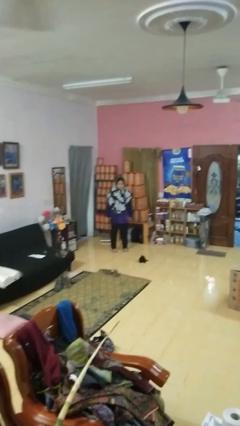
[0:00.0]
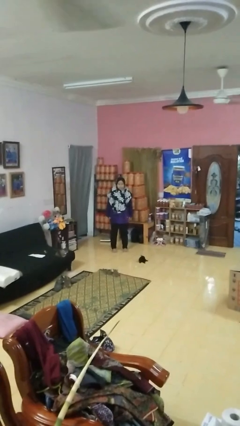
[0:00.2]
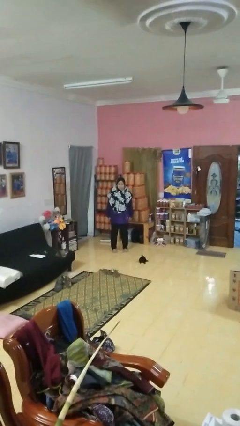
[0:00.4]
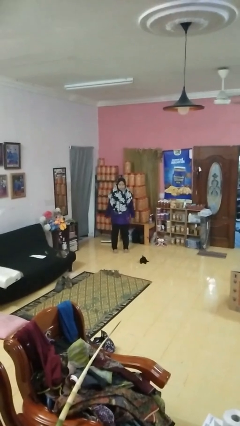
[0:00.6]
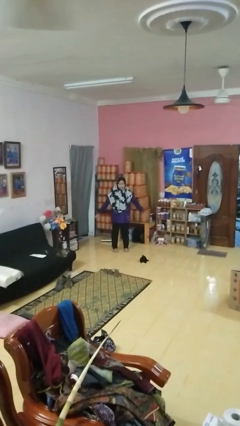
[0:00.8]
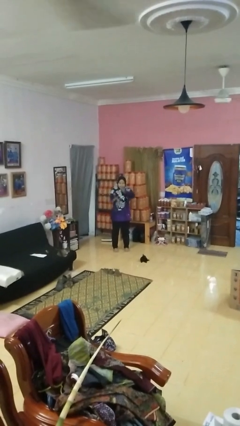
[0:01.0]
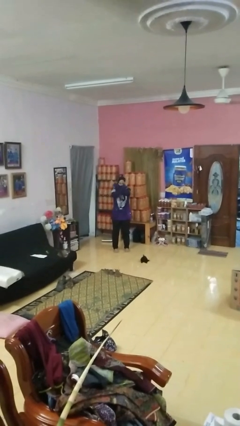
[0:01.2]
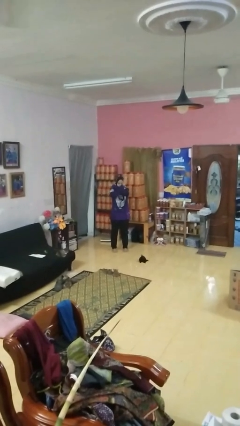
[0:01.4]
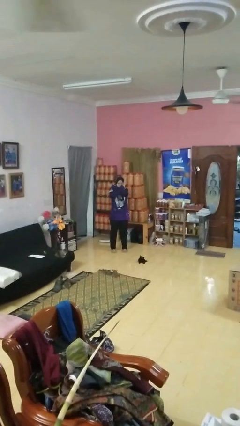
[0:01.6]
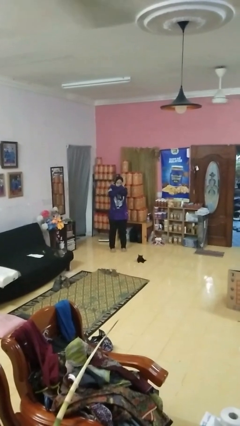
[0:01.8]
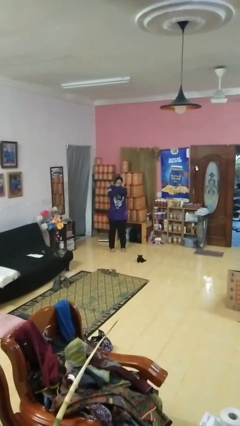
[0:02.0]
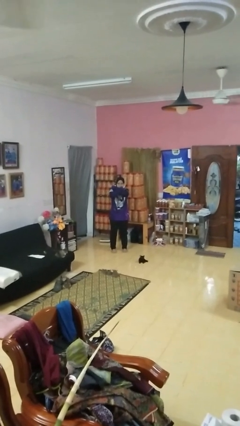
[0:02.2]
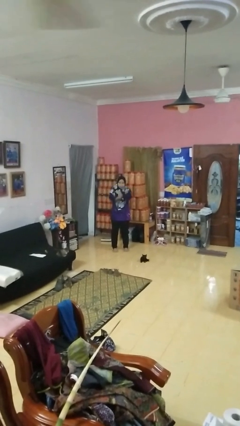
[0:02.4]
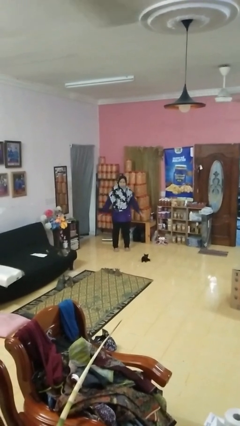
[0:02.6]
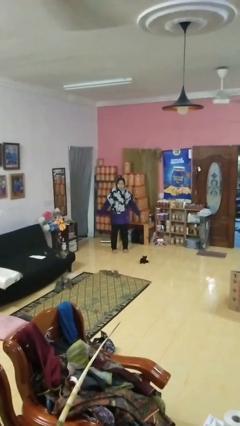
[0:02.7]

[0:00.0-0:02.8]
person gestures arms x

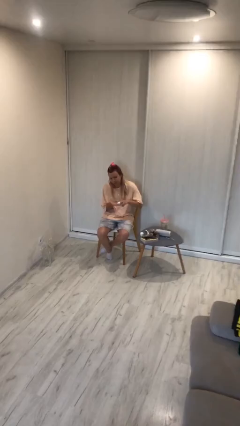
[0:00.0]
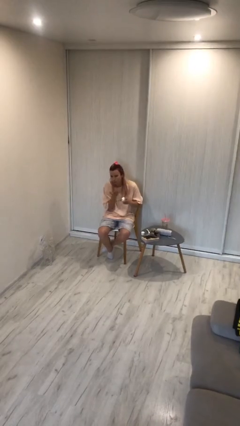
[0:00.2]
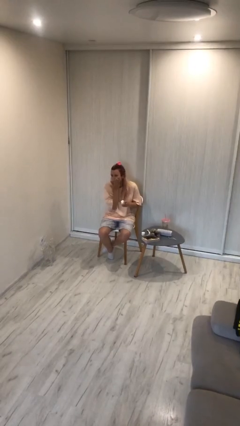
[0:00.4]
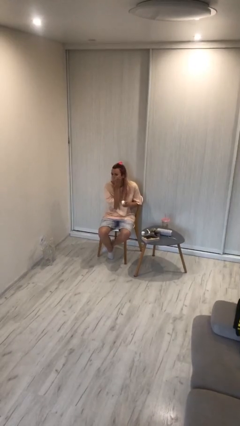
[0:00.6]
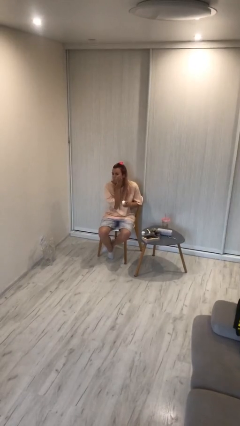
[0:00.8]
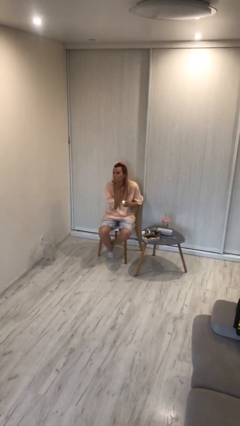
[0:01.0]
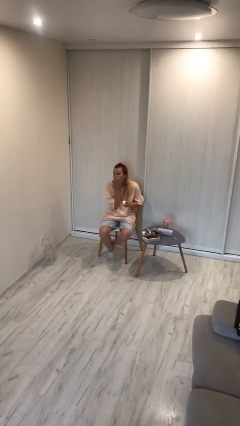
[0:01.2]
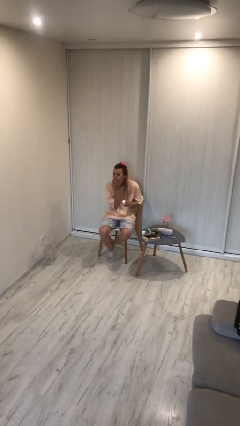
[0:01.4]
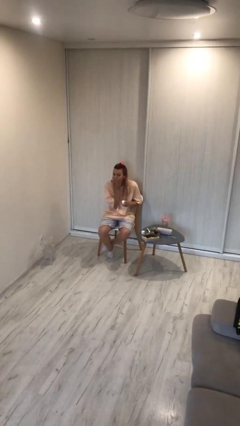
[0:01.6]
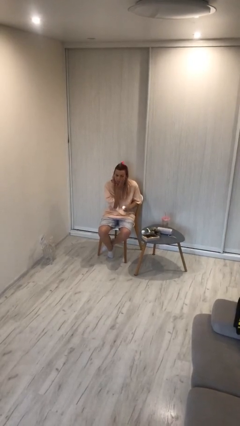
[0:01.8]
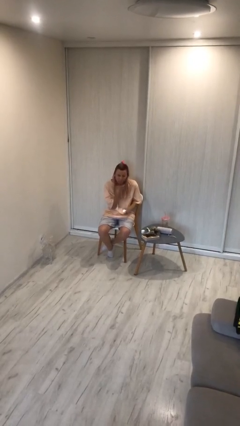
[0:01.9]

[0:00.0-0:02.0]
person applies shaving cream

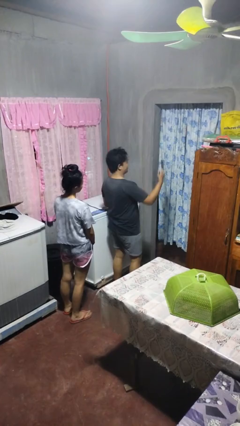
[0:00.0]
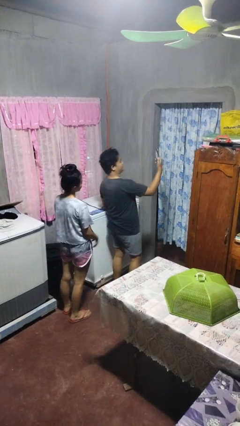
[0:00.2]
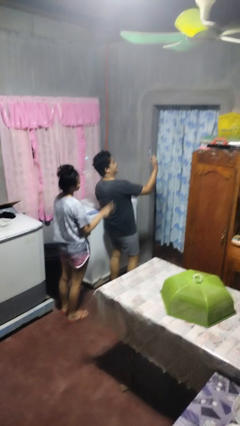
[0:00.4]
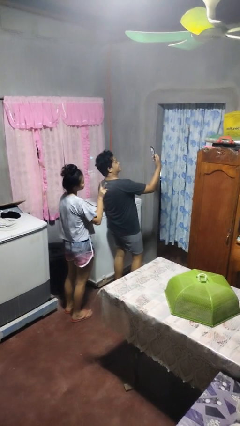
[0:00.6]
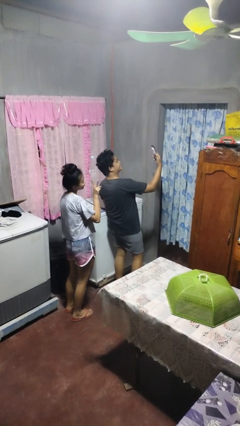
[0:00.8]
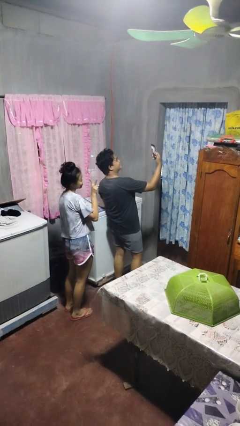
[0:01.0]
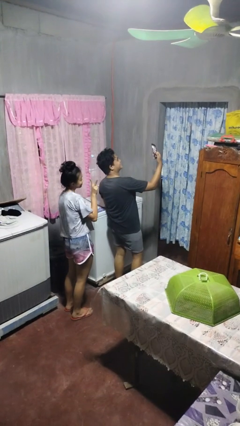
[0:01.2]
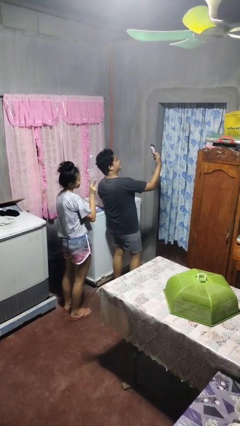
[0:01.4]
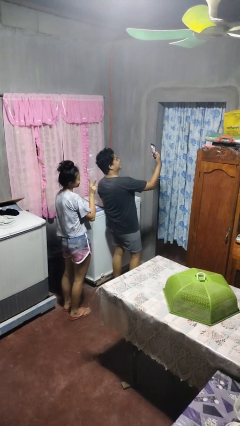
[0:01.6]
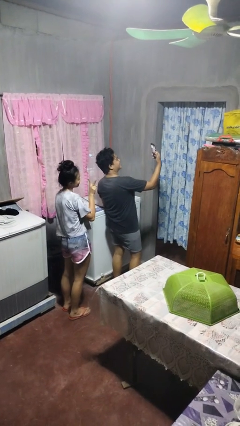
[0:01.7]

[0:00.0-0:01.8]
person takes selfie with person

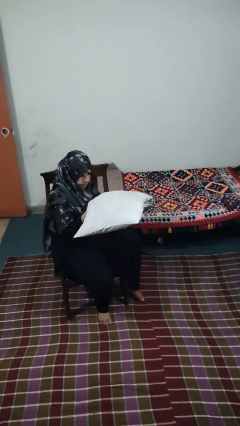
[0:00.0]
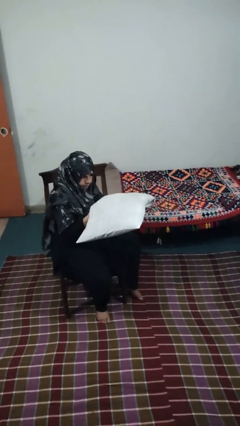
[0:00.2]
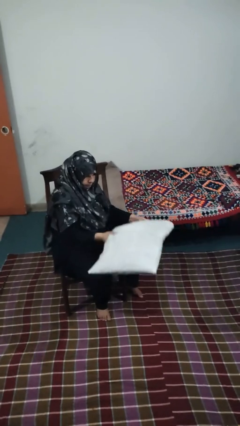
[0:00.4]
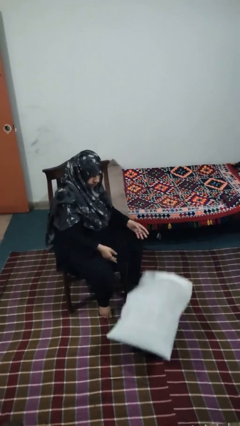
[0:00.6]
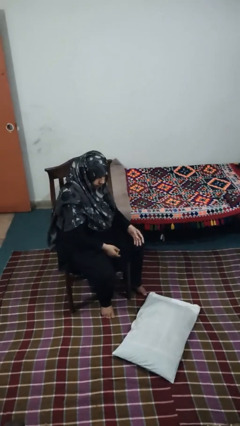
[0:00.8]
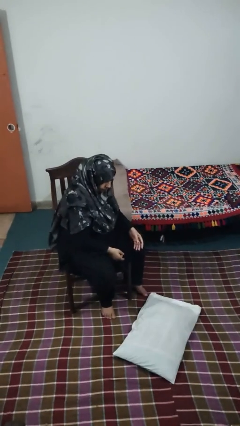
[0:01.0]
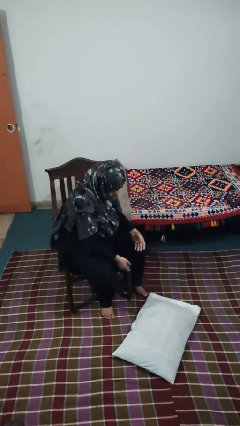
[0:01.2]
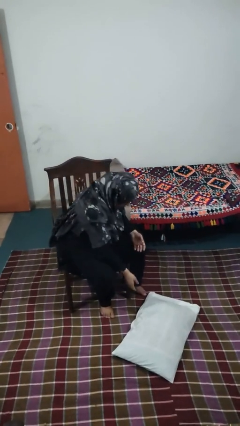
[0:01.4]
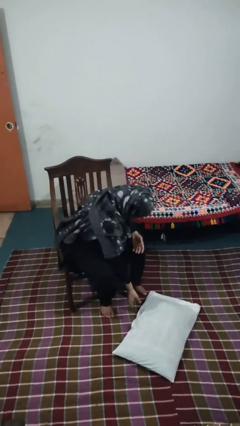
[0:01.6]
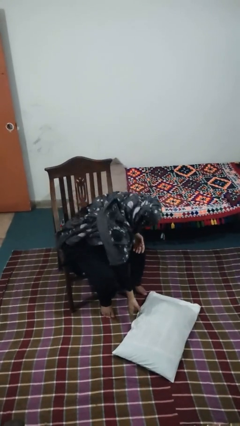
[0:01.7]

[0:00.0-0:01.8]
person drops object

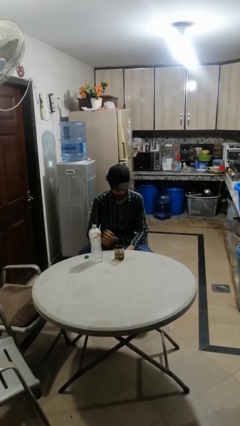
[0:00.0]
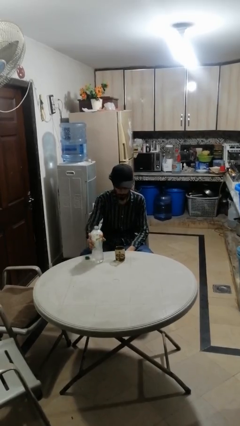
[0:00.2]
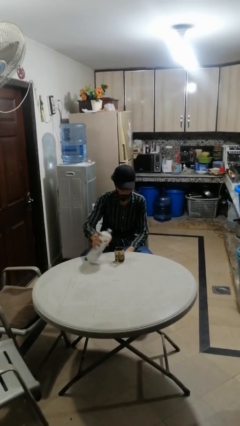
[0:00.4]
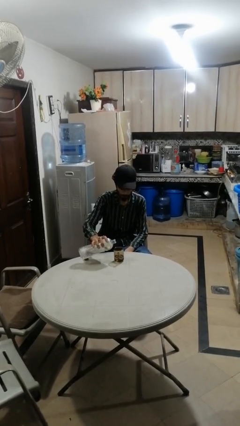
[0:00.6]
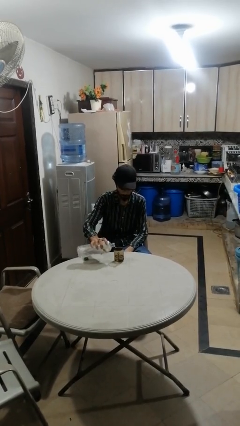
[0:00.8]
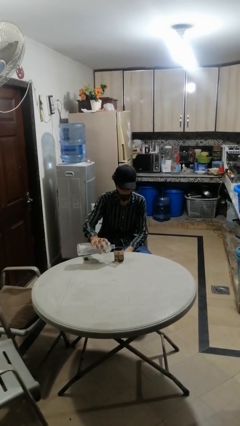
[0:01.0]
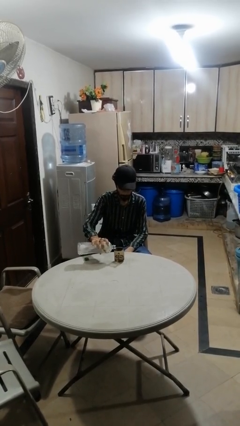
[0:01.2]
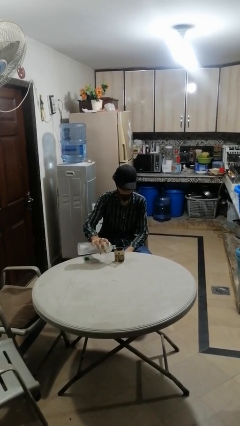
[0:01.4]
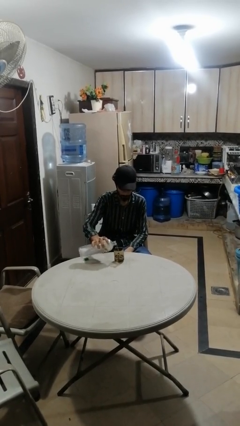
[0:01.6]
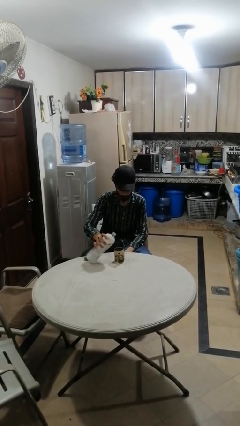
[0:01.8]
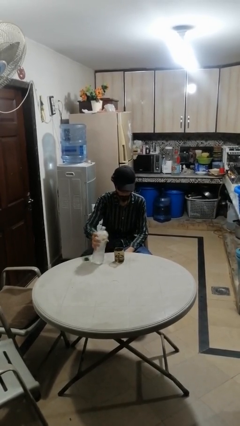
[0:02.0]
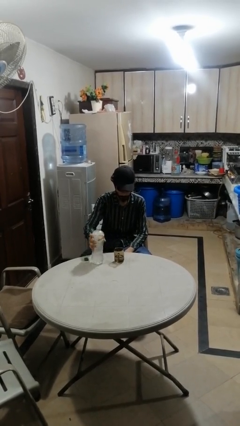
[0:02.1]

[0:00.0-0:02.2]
person pours liquid into cup

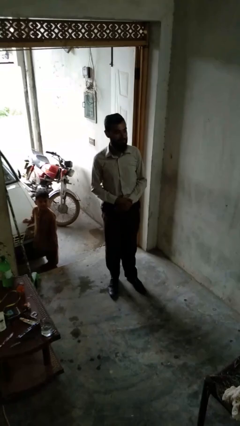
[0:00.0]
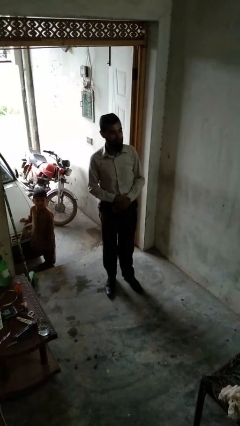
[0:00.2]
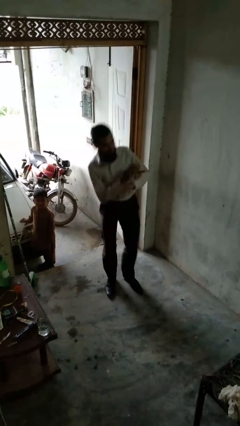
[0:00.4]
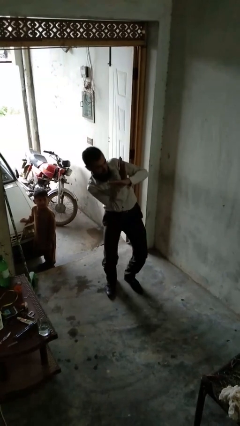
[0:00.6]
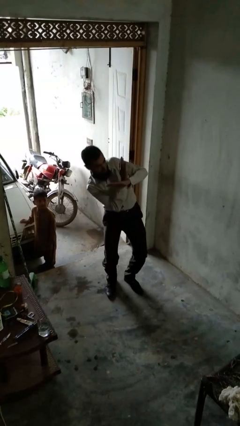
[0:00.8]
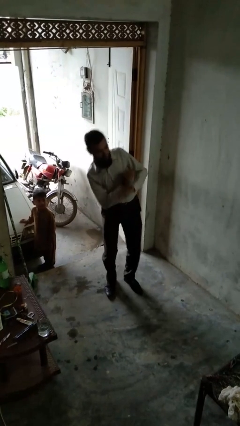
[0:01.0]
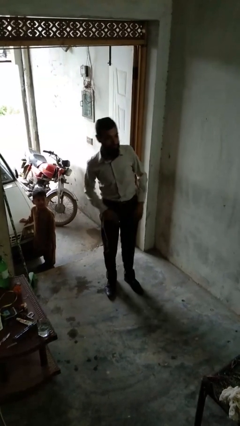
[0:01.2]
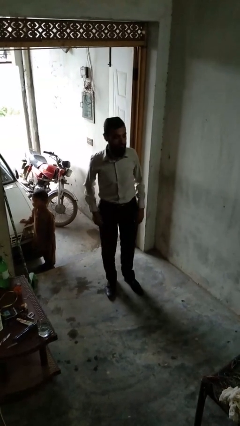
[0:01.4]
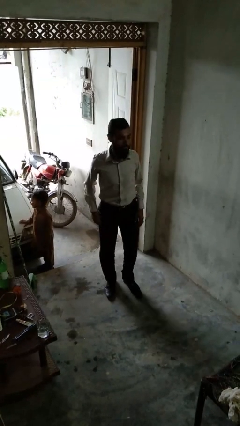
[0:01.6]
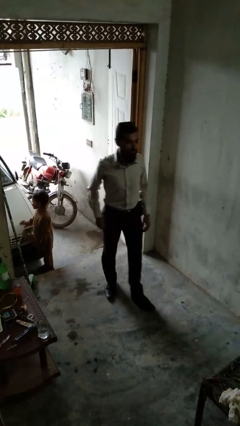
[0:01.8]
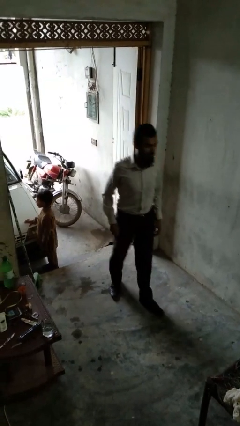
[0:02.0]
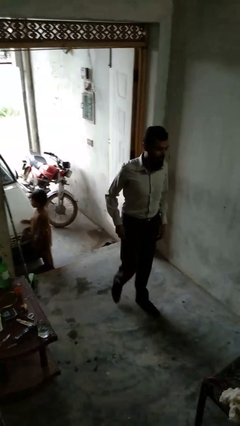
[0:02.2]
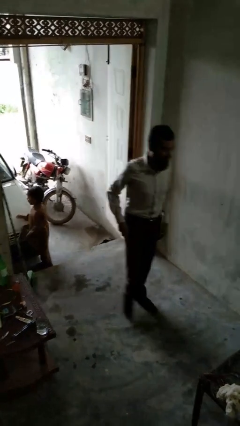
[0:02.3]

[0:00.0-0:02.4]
person karate chop

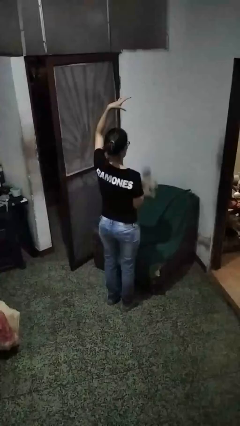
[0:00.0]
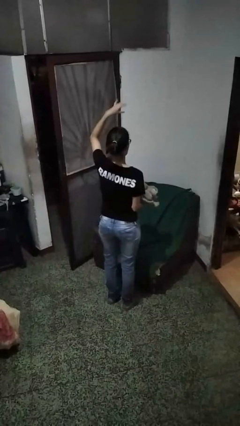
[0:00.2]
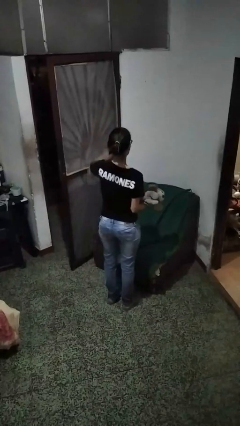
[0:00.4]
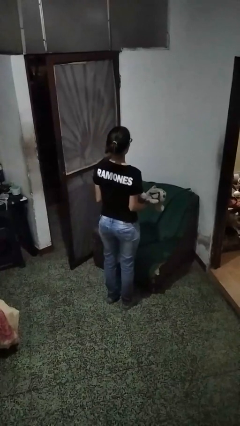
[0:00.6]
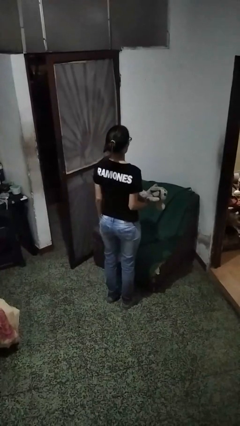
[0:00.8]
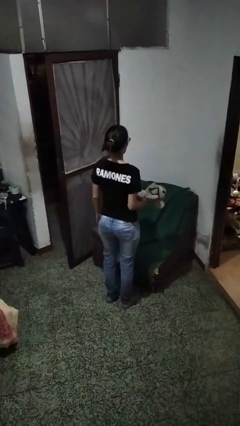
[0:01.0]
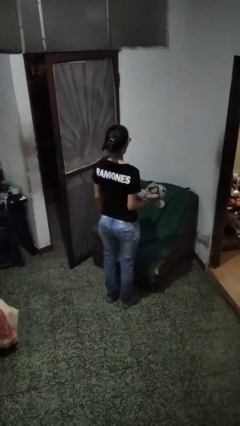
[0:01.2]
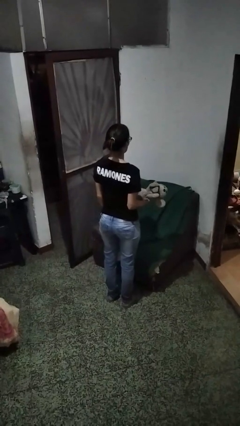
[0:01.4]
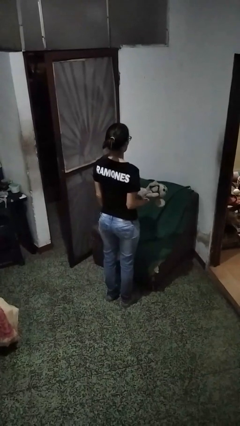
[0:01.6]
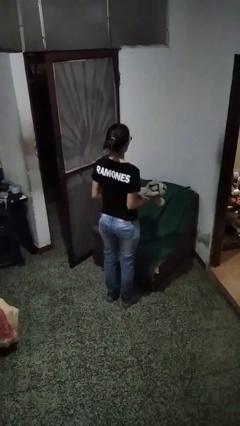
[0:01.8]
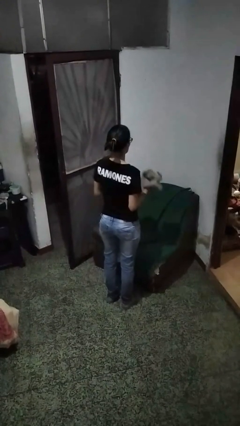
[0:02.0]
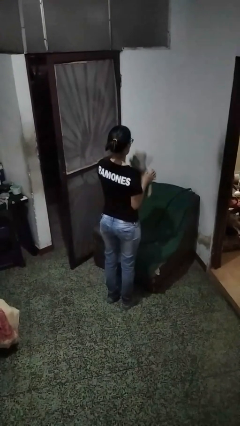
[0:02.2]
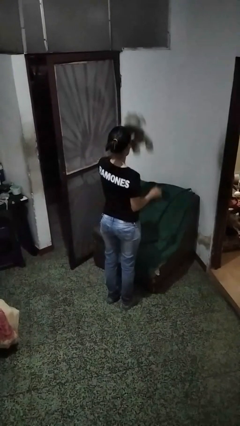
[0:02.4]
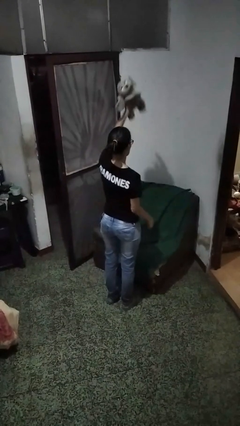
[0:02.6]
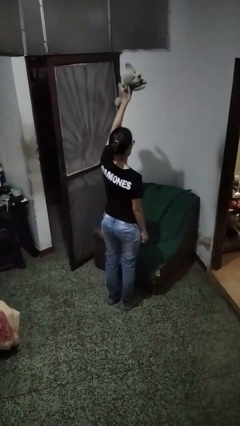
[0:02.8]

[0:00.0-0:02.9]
person catches dropped object

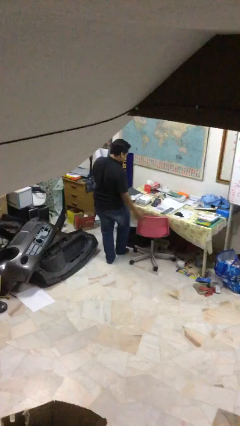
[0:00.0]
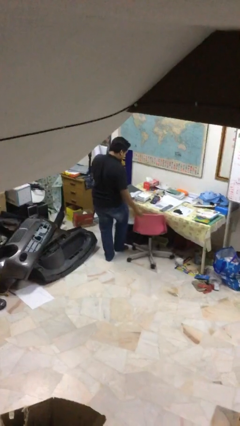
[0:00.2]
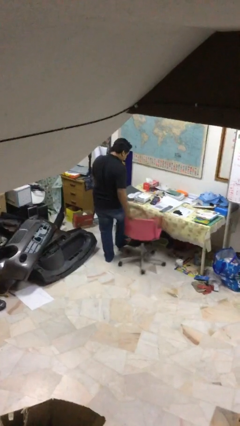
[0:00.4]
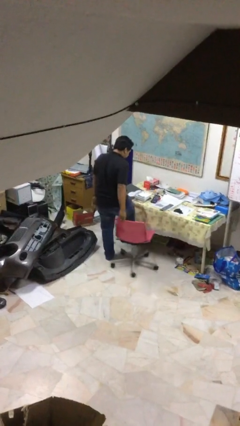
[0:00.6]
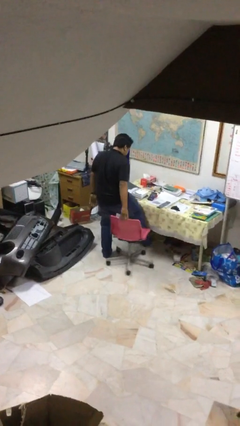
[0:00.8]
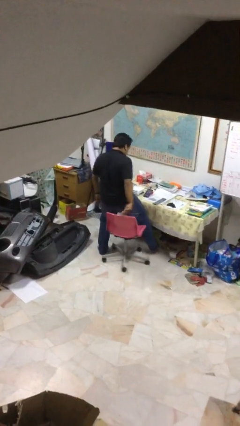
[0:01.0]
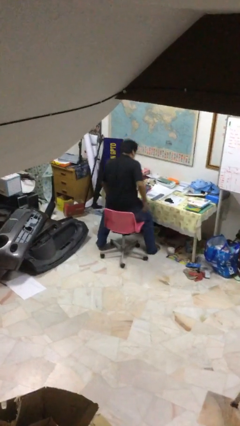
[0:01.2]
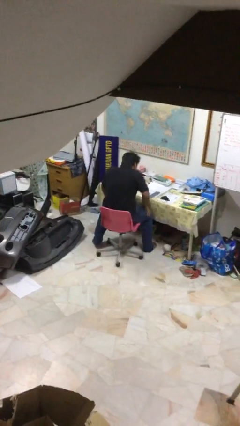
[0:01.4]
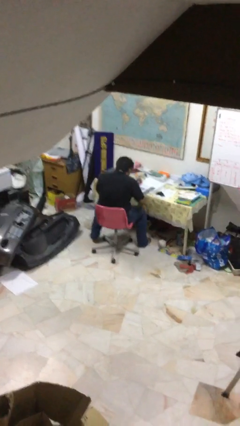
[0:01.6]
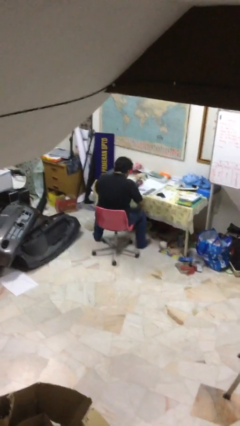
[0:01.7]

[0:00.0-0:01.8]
person sits down
